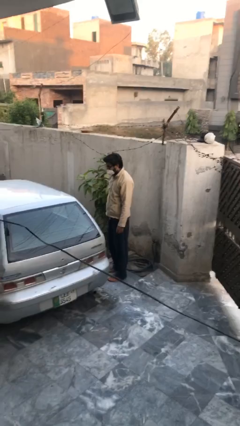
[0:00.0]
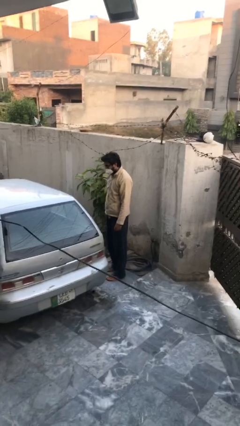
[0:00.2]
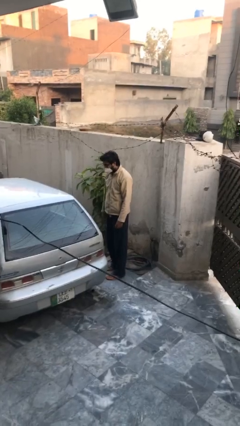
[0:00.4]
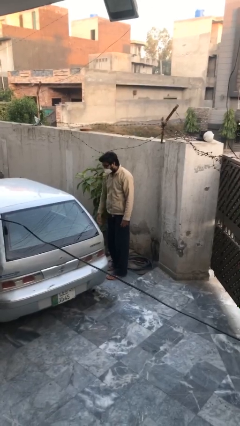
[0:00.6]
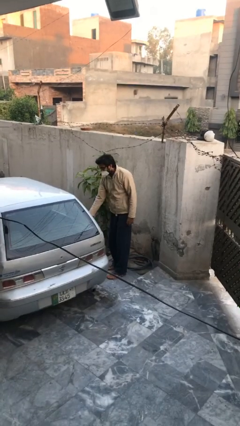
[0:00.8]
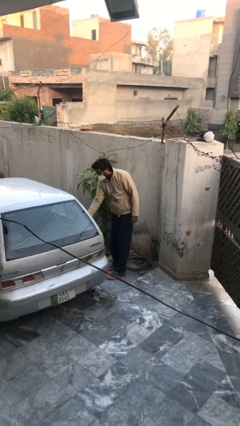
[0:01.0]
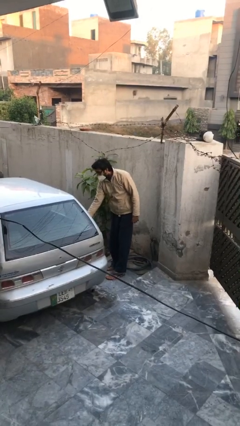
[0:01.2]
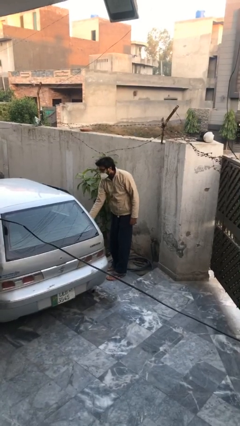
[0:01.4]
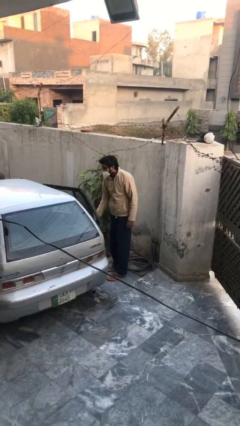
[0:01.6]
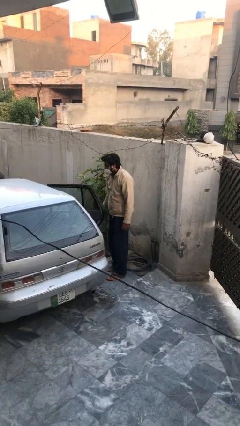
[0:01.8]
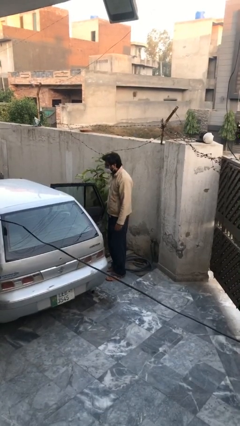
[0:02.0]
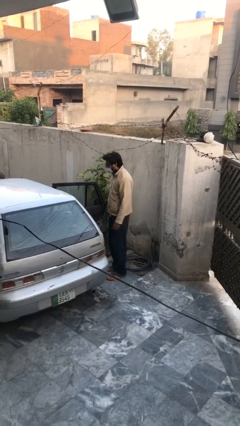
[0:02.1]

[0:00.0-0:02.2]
person opens car door

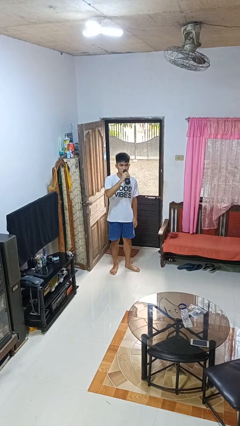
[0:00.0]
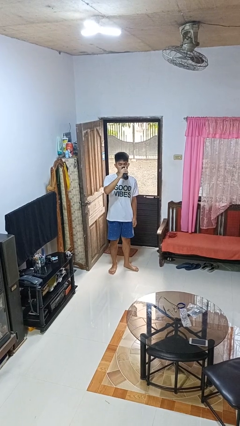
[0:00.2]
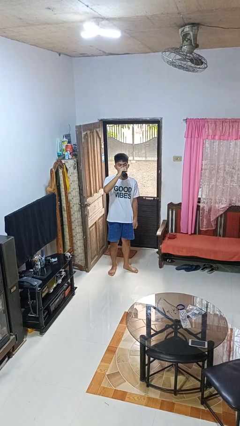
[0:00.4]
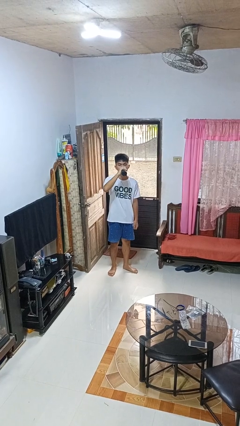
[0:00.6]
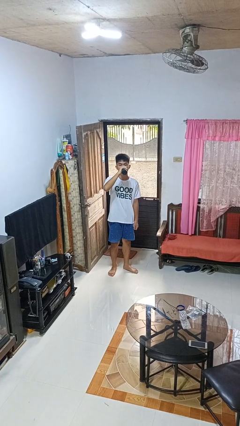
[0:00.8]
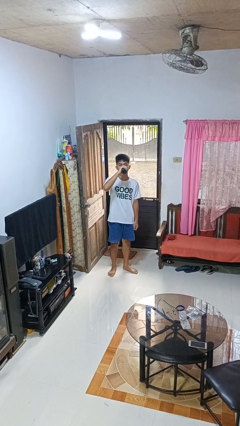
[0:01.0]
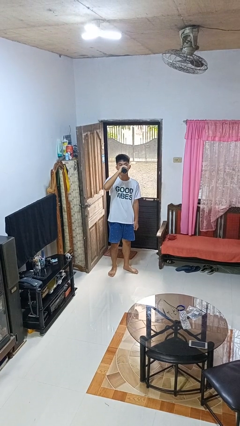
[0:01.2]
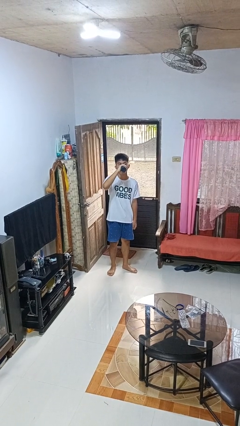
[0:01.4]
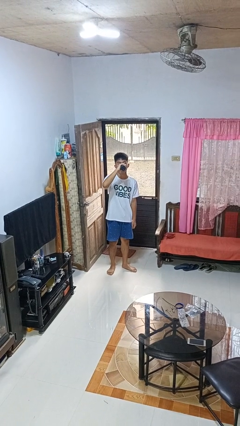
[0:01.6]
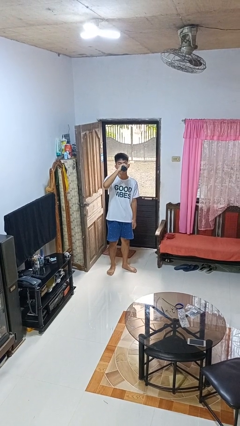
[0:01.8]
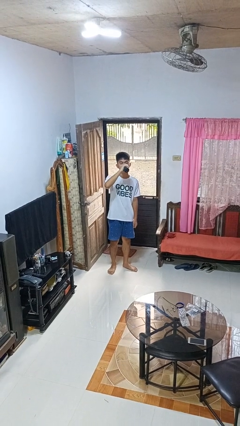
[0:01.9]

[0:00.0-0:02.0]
person drinks from bottle

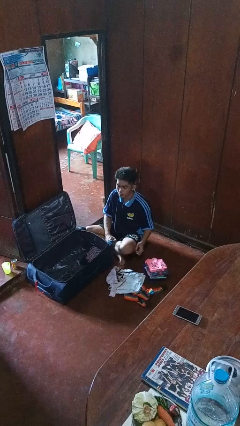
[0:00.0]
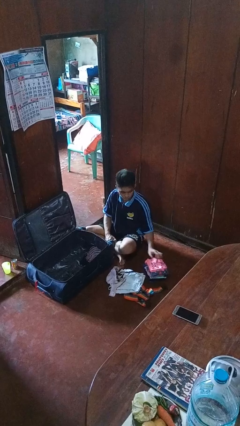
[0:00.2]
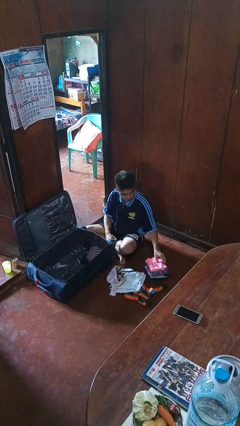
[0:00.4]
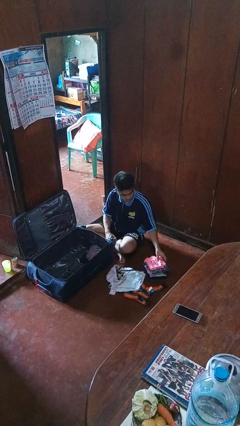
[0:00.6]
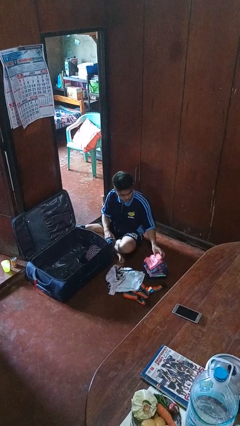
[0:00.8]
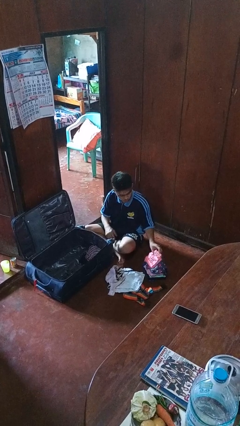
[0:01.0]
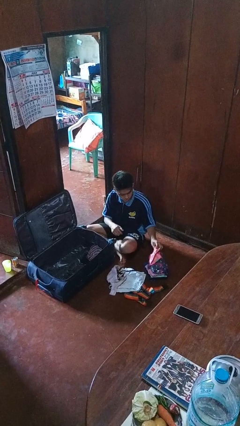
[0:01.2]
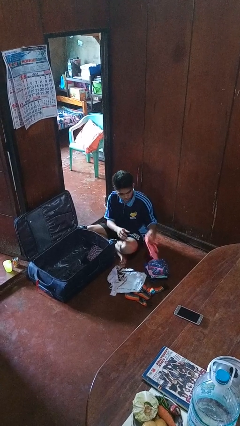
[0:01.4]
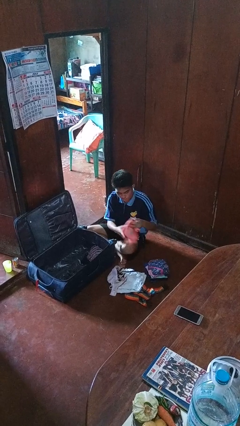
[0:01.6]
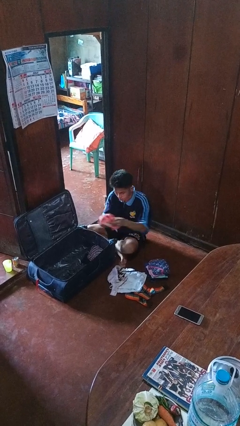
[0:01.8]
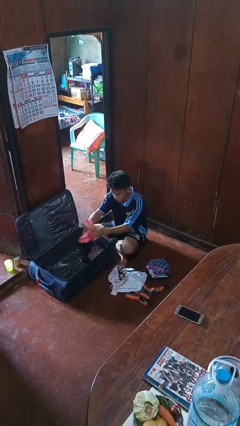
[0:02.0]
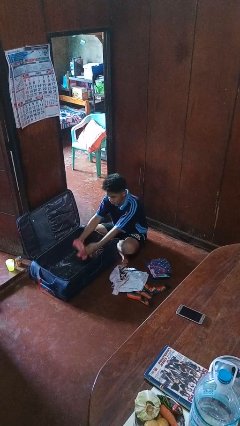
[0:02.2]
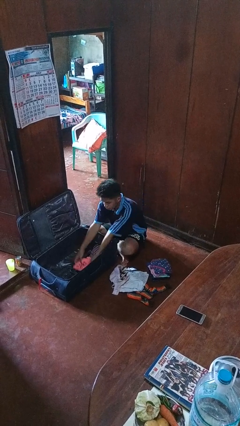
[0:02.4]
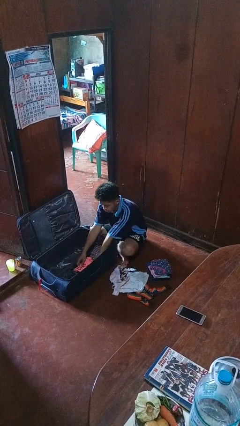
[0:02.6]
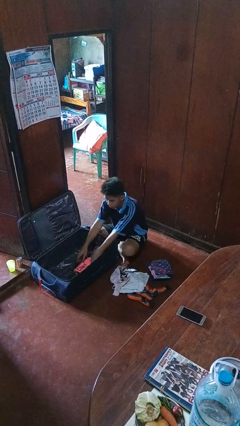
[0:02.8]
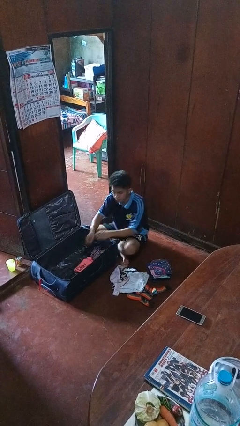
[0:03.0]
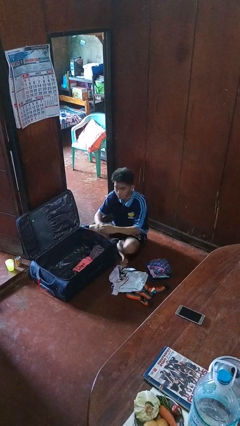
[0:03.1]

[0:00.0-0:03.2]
person loads clothes into suitcase

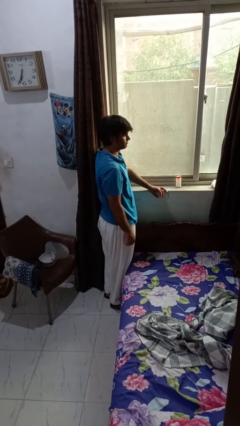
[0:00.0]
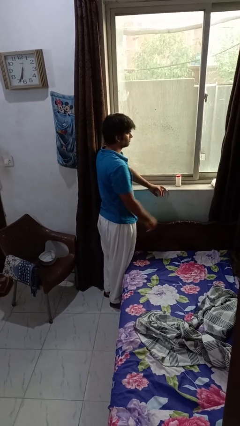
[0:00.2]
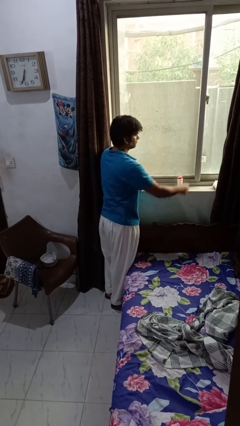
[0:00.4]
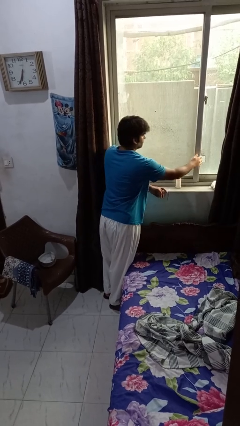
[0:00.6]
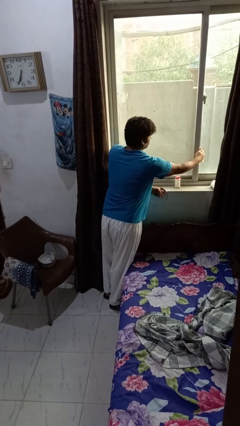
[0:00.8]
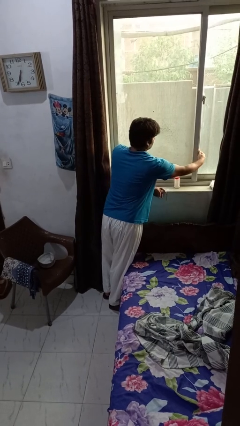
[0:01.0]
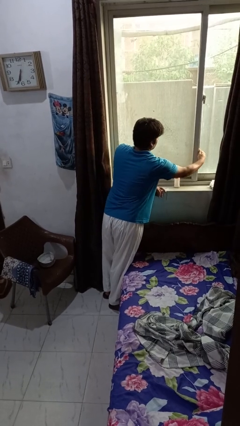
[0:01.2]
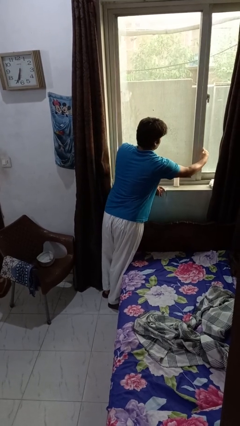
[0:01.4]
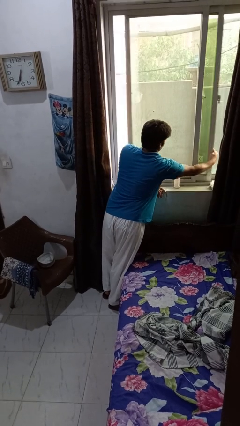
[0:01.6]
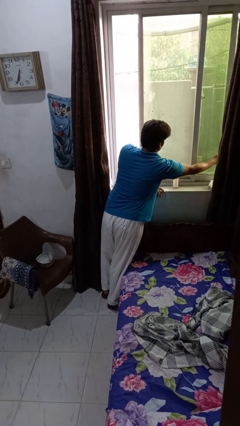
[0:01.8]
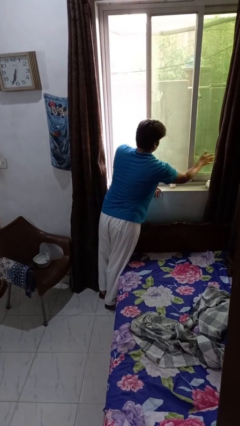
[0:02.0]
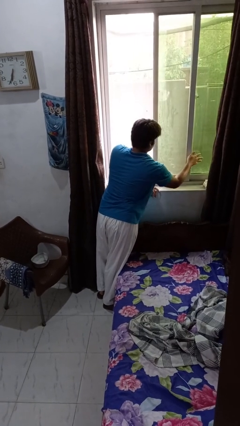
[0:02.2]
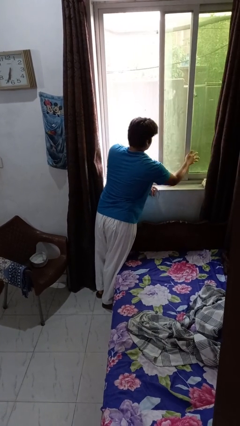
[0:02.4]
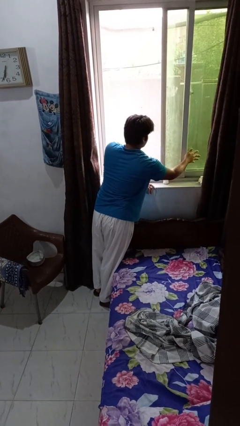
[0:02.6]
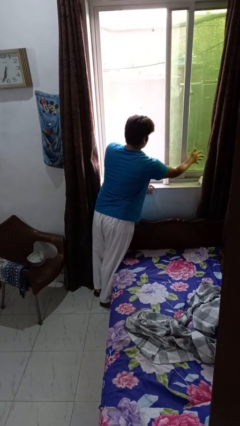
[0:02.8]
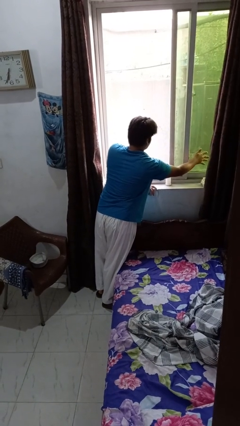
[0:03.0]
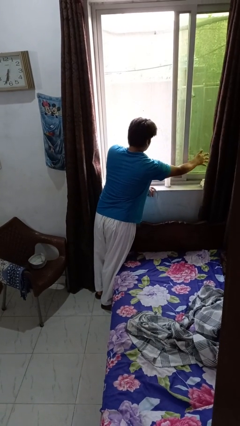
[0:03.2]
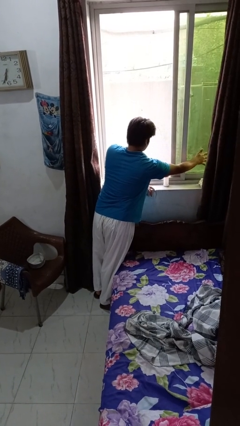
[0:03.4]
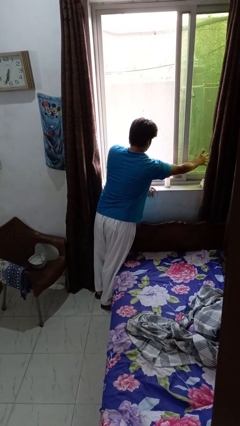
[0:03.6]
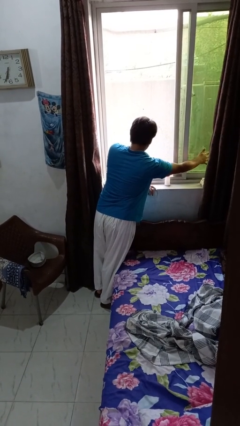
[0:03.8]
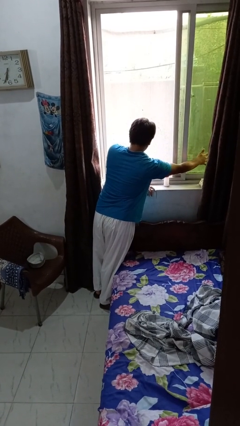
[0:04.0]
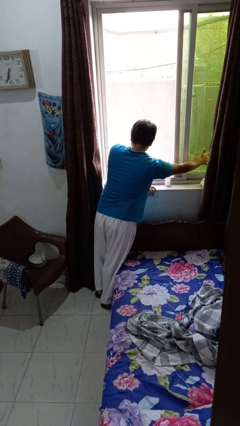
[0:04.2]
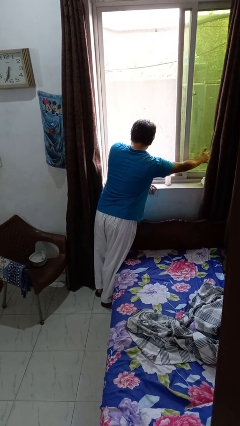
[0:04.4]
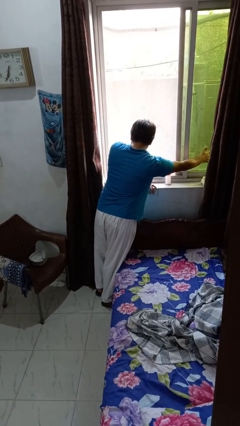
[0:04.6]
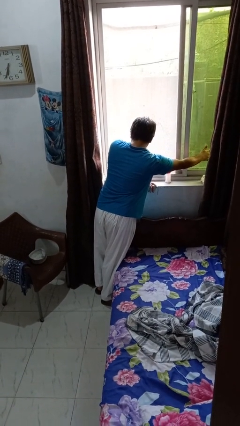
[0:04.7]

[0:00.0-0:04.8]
person opens home window

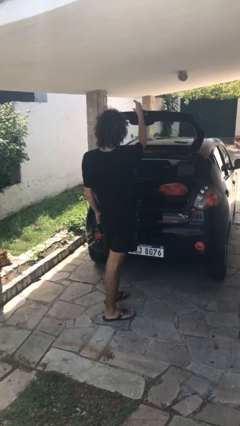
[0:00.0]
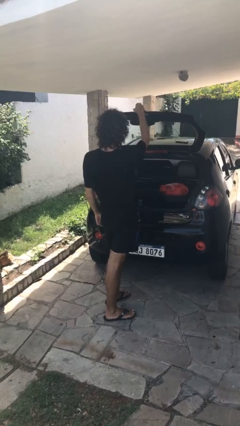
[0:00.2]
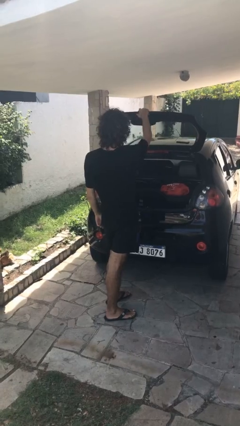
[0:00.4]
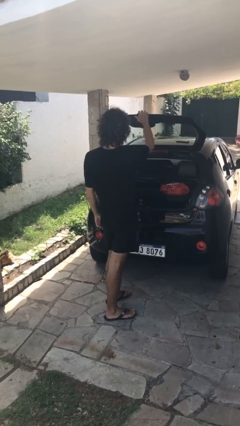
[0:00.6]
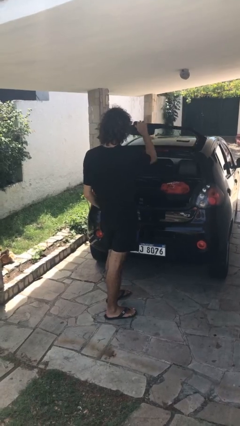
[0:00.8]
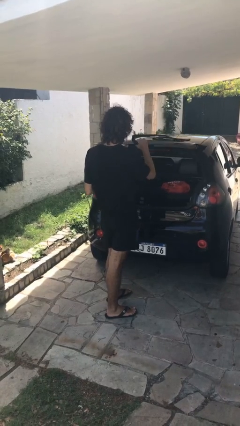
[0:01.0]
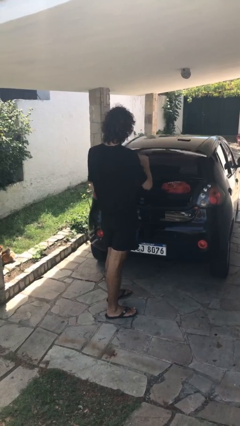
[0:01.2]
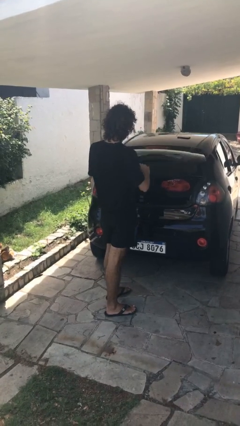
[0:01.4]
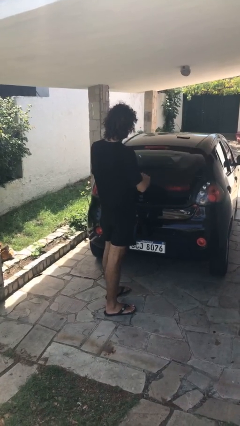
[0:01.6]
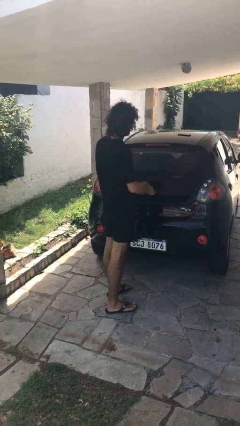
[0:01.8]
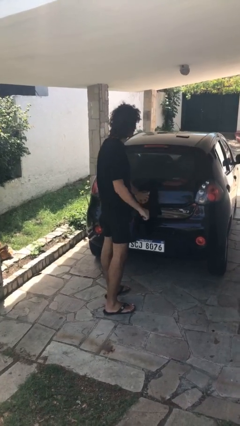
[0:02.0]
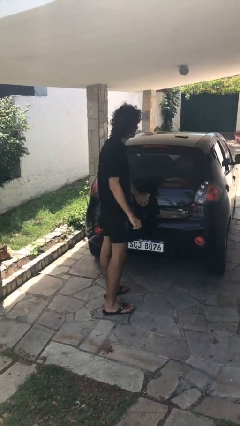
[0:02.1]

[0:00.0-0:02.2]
person closes car trunk

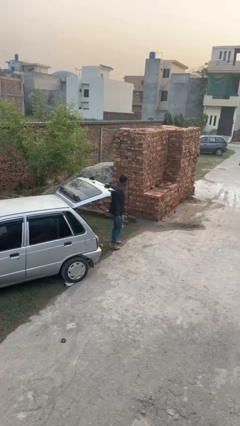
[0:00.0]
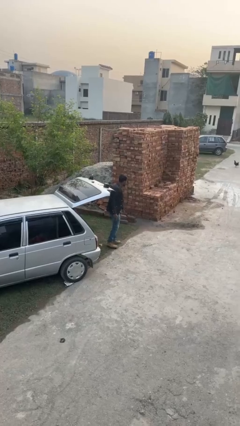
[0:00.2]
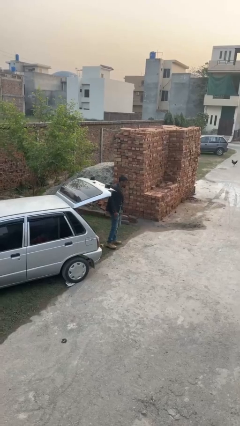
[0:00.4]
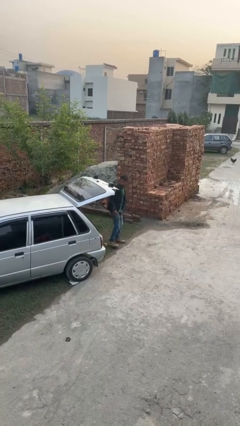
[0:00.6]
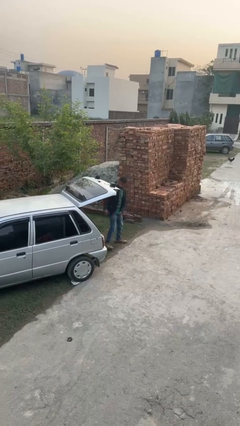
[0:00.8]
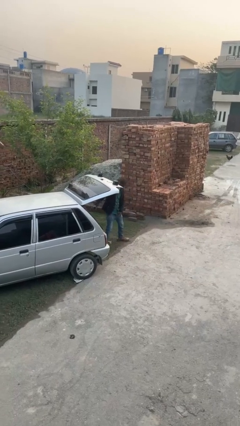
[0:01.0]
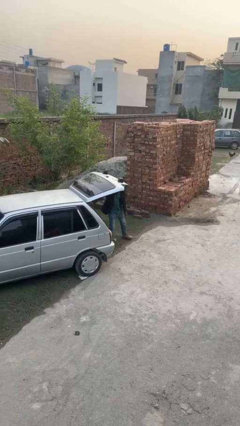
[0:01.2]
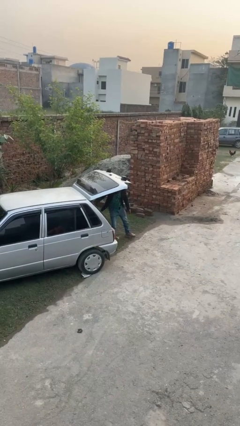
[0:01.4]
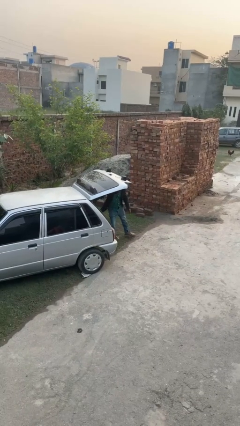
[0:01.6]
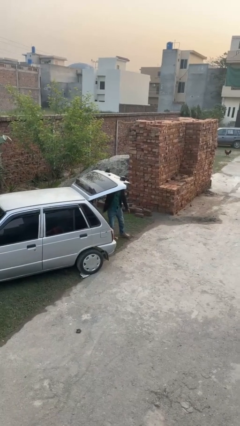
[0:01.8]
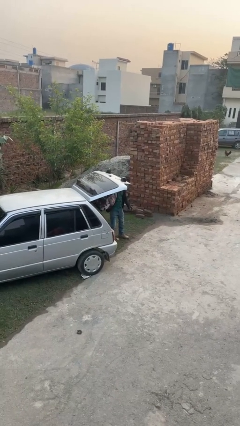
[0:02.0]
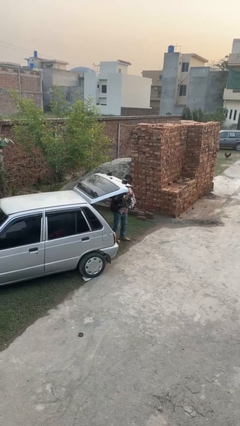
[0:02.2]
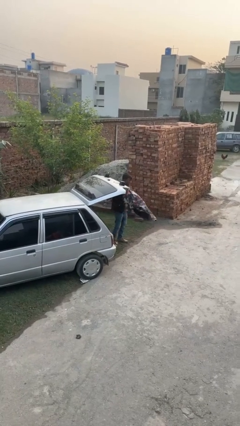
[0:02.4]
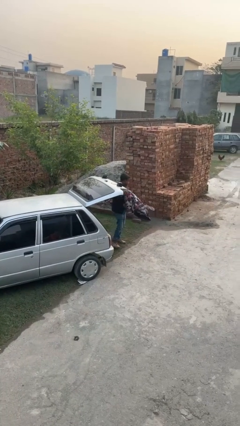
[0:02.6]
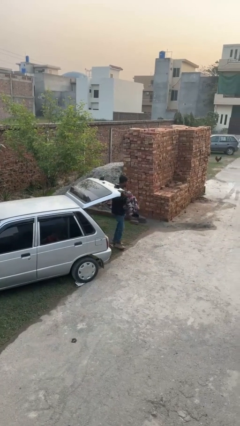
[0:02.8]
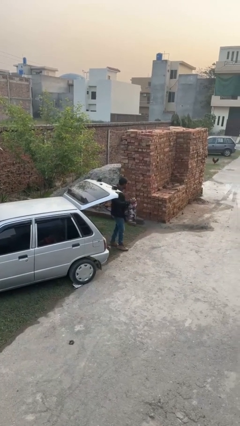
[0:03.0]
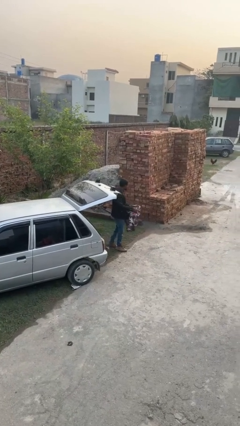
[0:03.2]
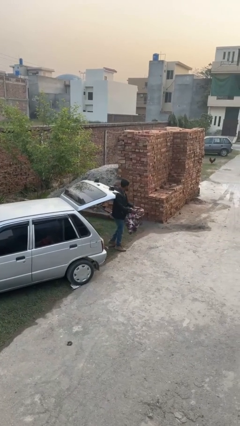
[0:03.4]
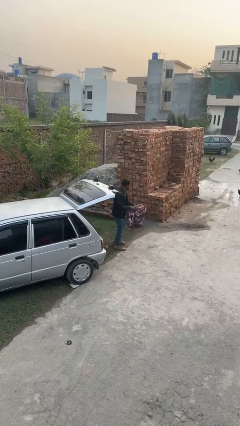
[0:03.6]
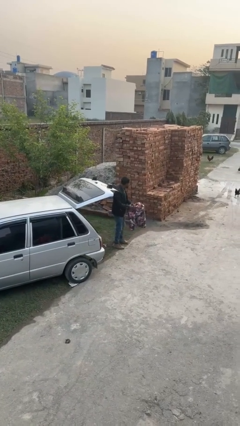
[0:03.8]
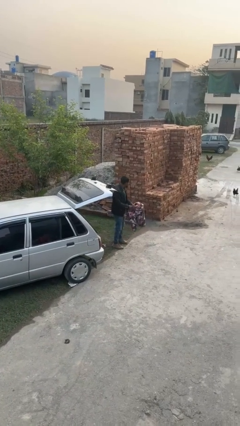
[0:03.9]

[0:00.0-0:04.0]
person unloads car
